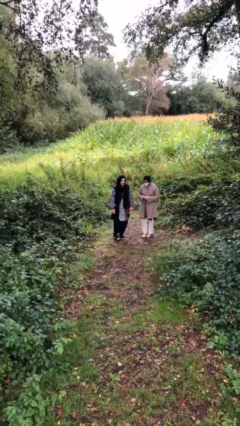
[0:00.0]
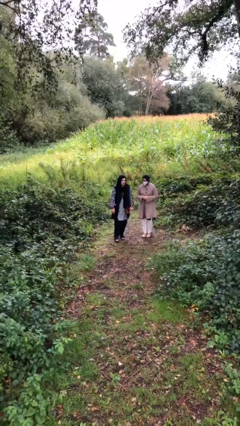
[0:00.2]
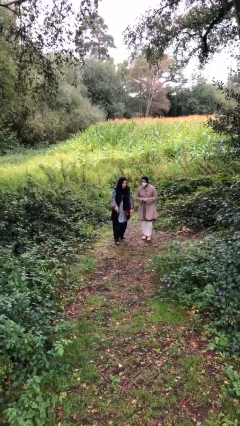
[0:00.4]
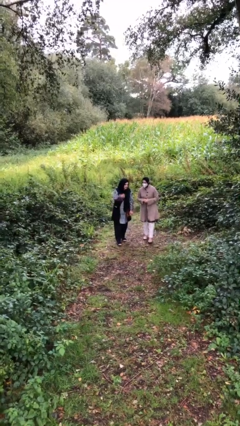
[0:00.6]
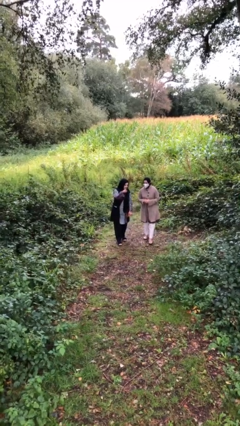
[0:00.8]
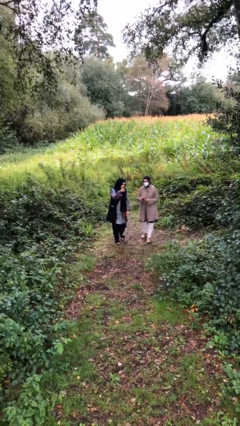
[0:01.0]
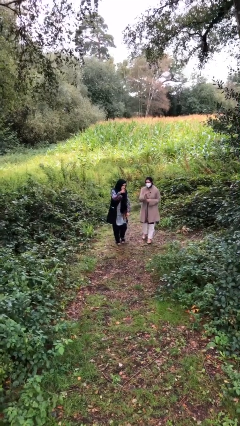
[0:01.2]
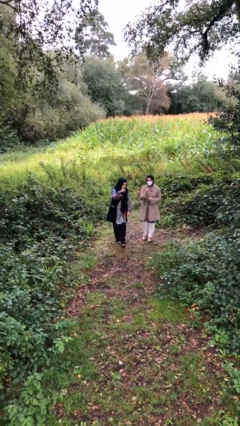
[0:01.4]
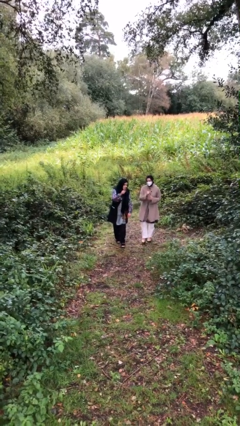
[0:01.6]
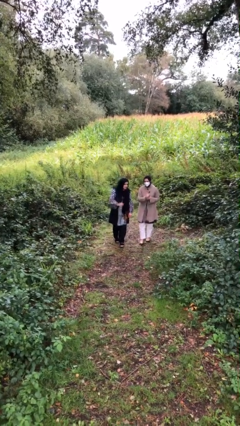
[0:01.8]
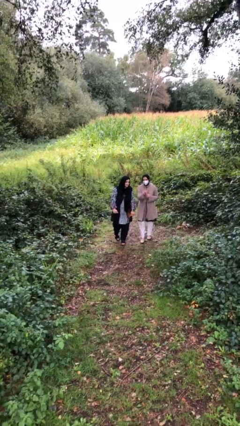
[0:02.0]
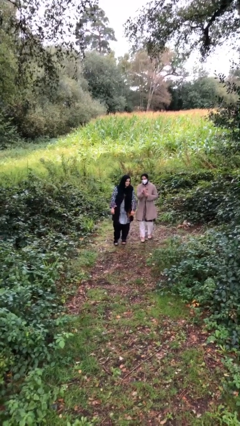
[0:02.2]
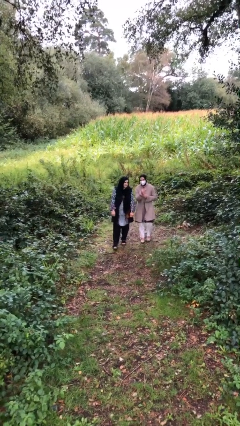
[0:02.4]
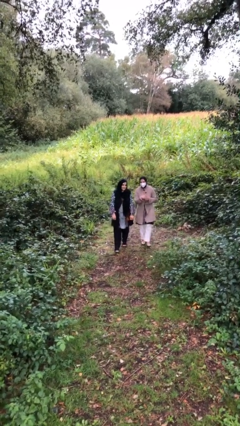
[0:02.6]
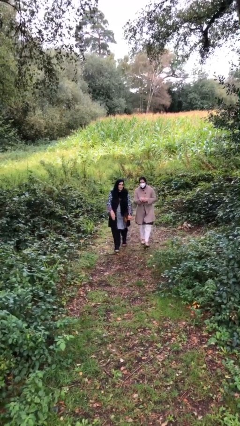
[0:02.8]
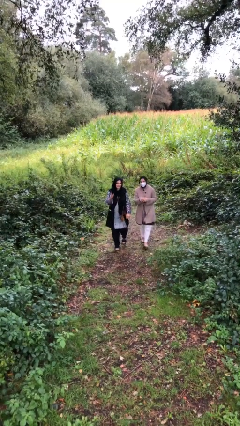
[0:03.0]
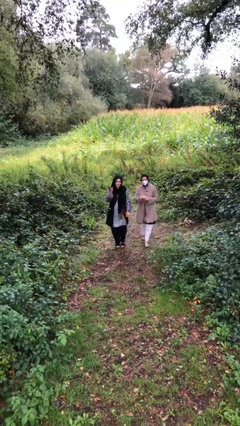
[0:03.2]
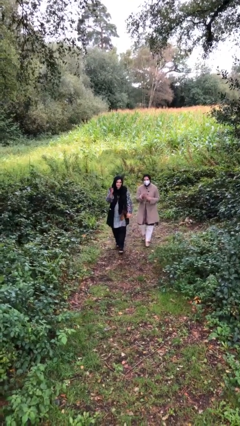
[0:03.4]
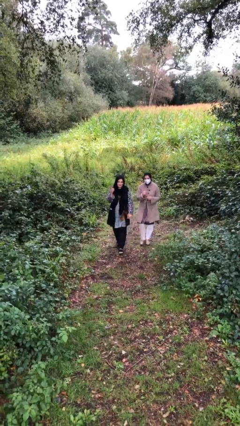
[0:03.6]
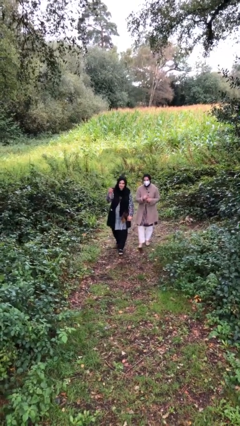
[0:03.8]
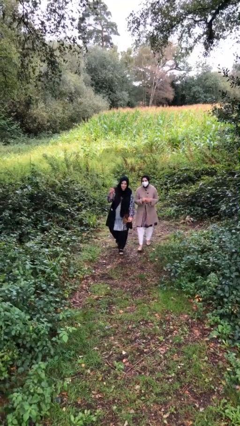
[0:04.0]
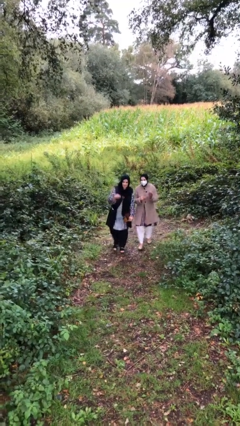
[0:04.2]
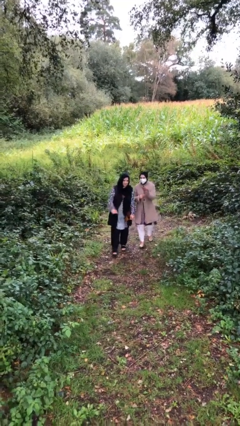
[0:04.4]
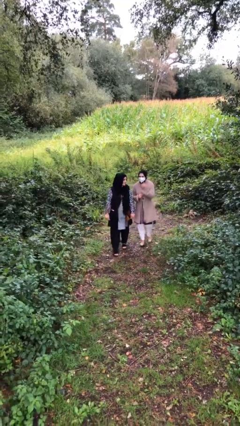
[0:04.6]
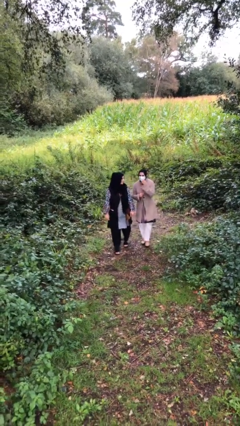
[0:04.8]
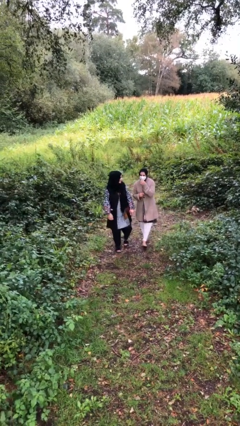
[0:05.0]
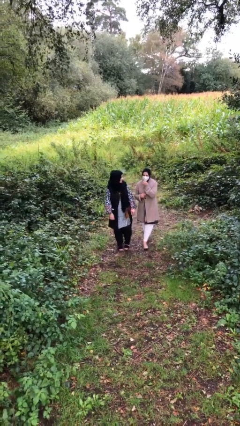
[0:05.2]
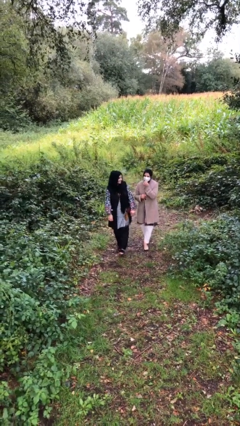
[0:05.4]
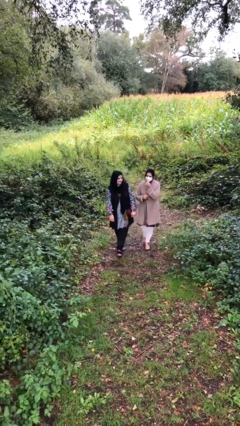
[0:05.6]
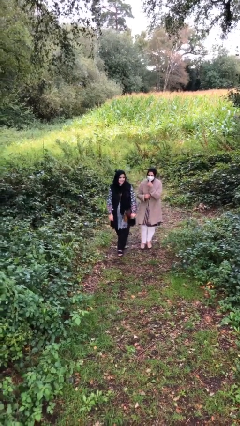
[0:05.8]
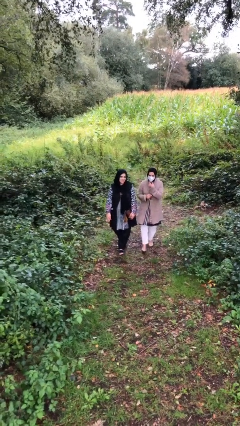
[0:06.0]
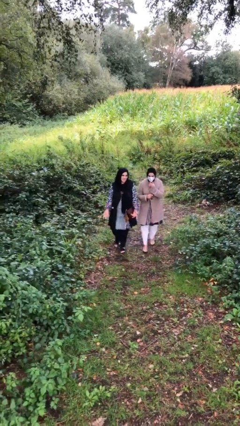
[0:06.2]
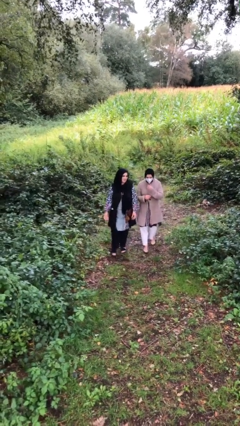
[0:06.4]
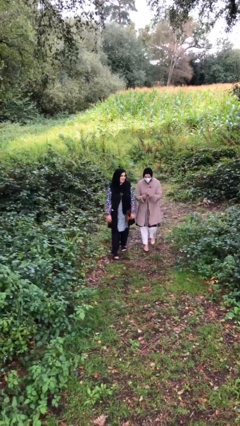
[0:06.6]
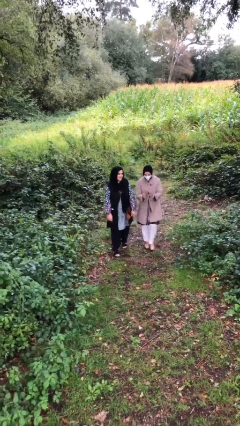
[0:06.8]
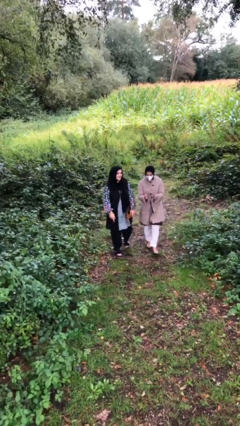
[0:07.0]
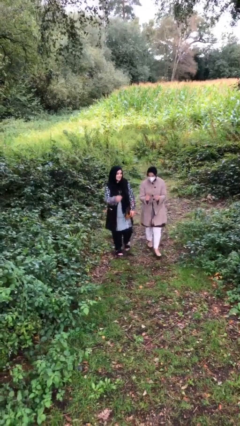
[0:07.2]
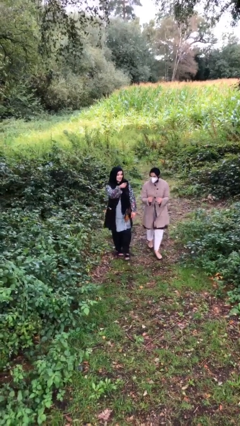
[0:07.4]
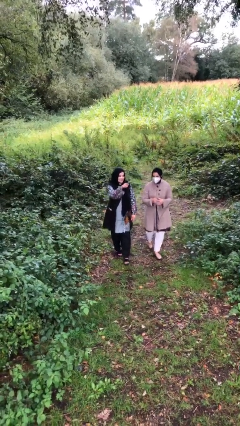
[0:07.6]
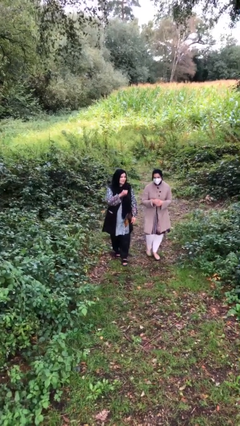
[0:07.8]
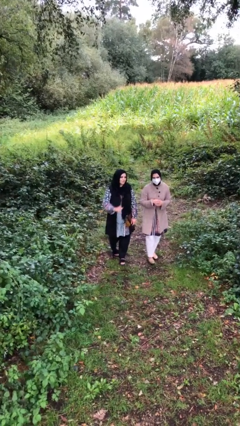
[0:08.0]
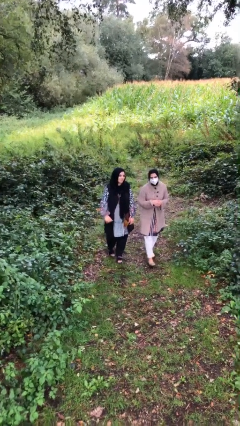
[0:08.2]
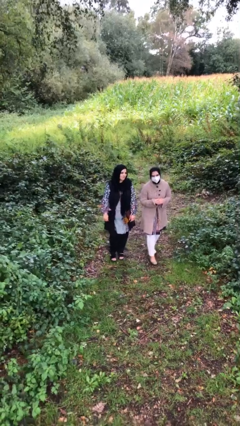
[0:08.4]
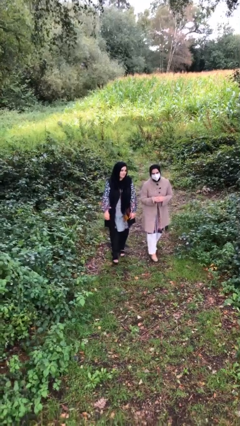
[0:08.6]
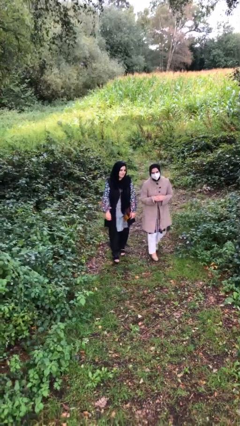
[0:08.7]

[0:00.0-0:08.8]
person talks to person

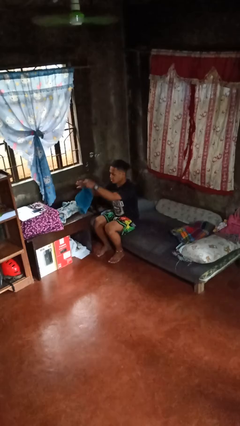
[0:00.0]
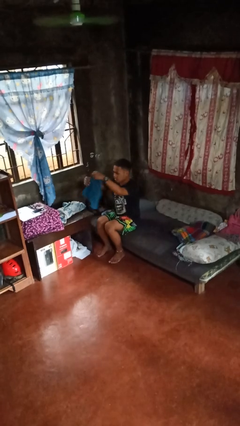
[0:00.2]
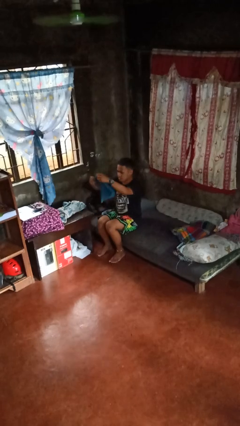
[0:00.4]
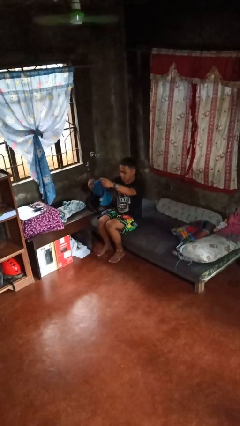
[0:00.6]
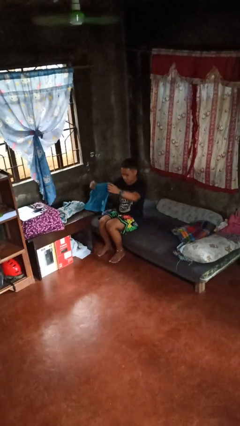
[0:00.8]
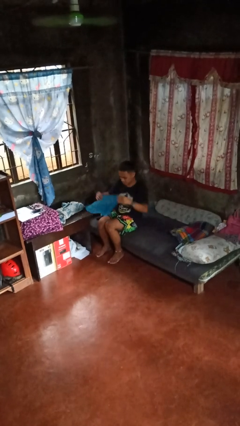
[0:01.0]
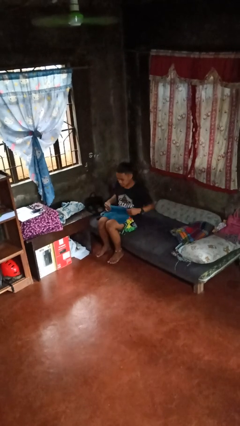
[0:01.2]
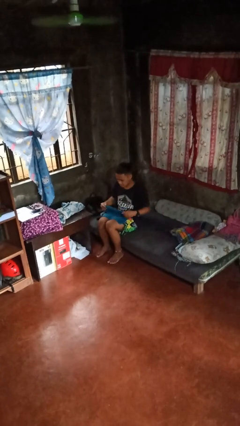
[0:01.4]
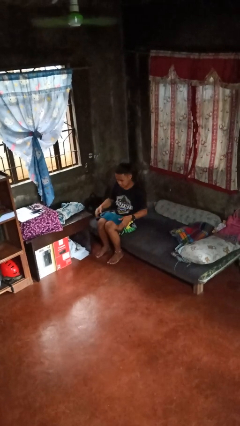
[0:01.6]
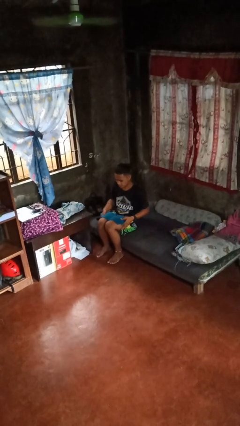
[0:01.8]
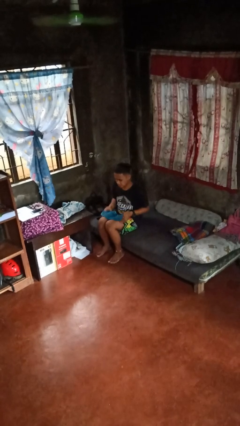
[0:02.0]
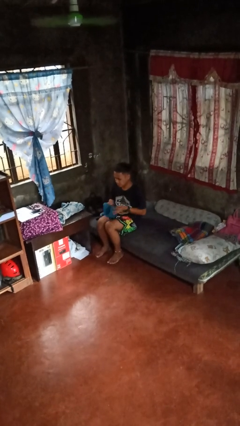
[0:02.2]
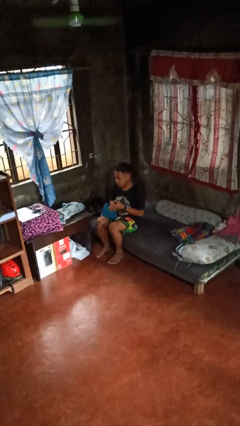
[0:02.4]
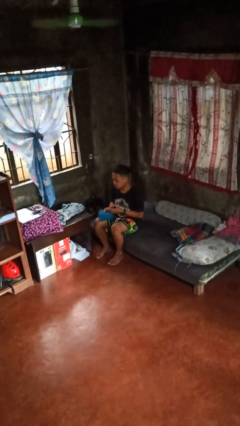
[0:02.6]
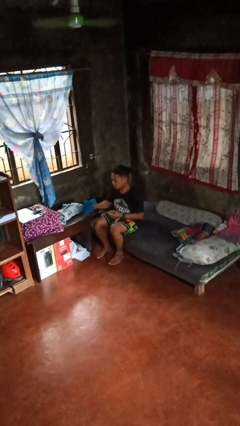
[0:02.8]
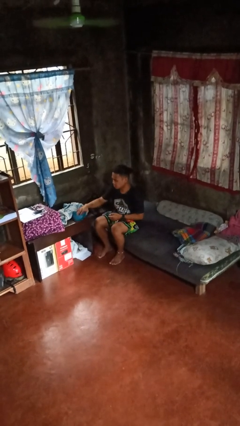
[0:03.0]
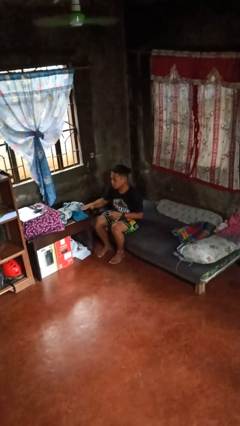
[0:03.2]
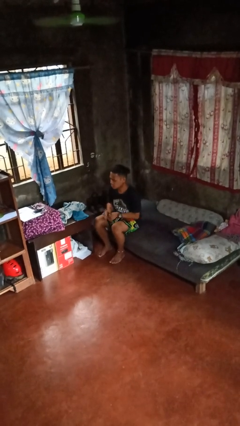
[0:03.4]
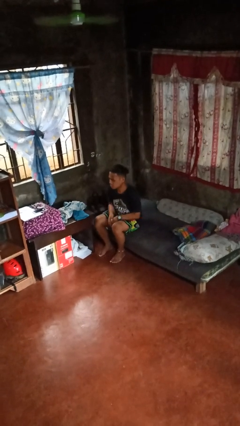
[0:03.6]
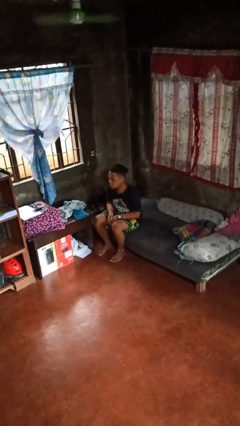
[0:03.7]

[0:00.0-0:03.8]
person folds towel

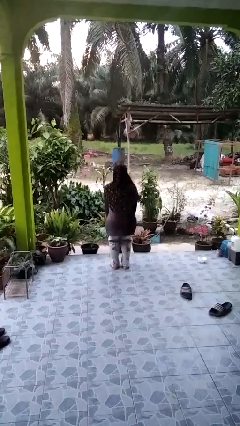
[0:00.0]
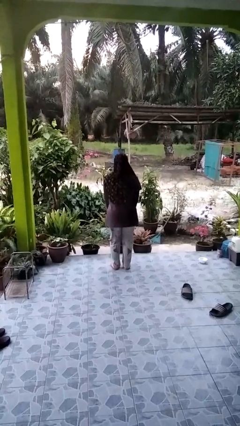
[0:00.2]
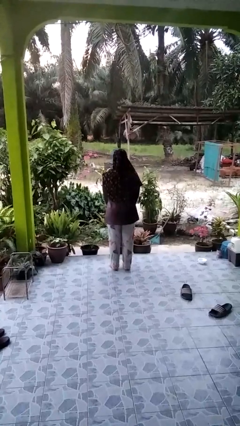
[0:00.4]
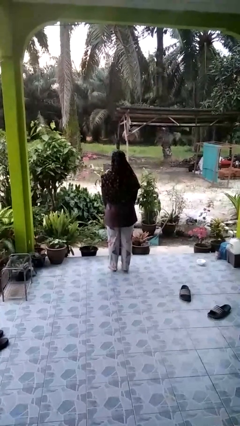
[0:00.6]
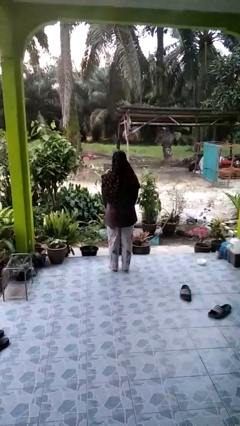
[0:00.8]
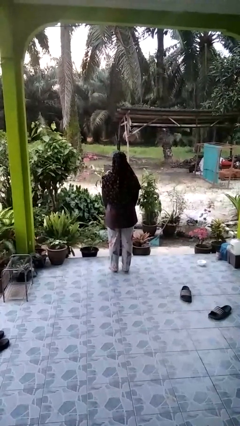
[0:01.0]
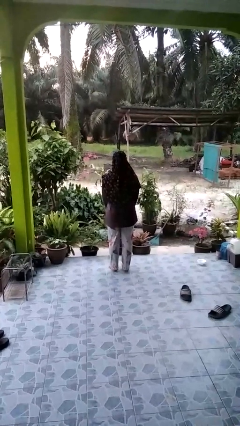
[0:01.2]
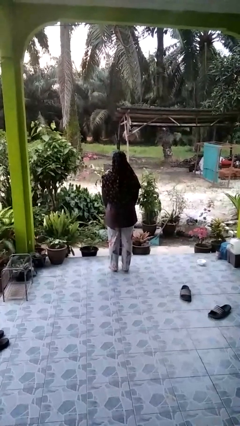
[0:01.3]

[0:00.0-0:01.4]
person stands up

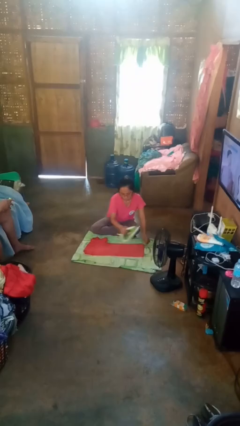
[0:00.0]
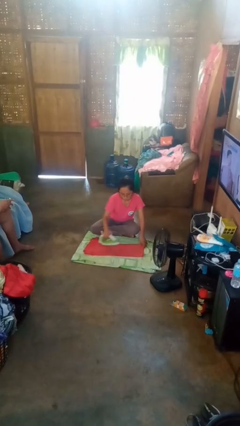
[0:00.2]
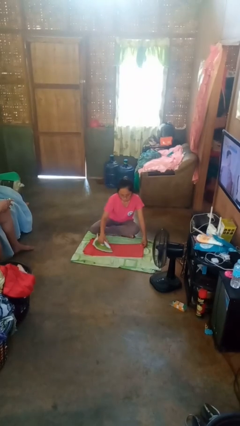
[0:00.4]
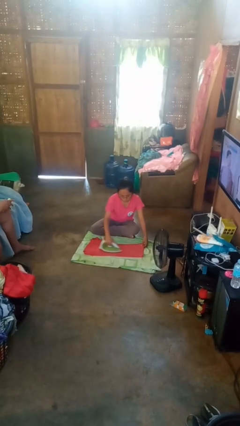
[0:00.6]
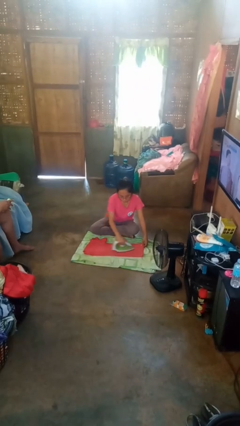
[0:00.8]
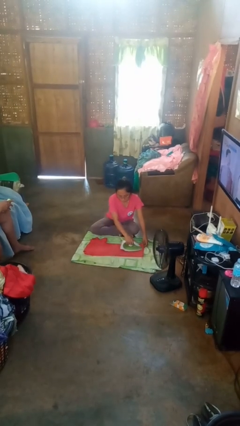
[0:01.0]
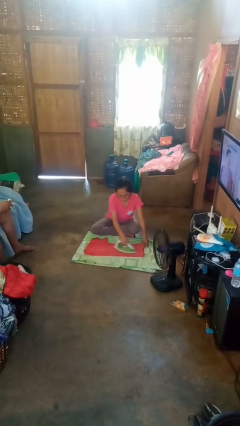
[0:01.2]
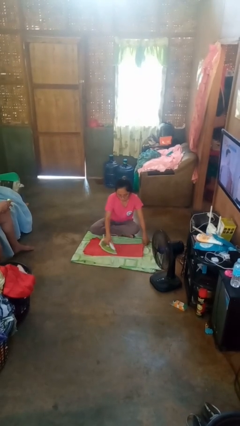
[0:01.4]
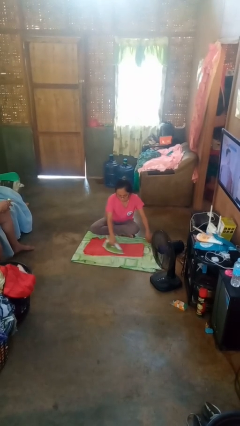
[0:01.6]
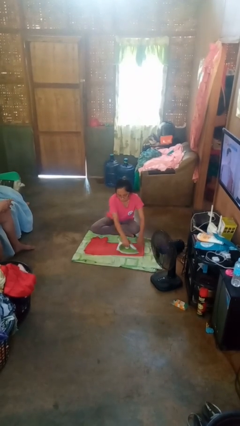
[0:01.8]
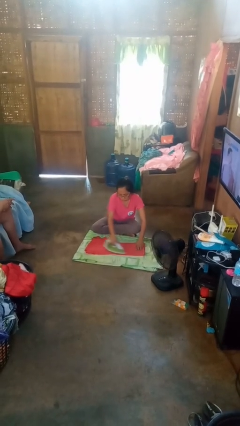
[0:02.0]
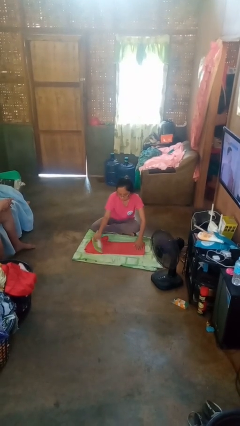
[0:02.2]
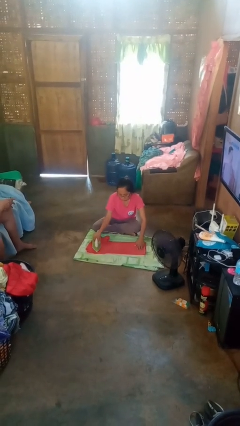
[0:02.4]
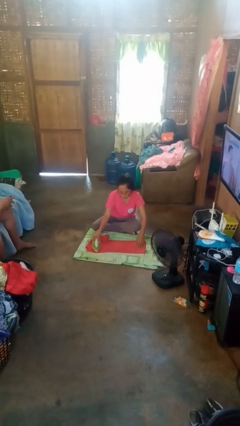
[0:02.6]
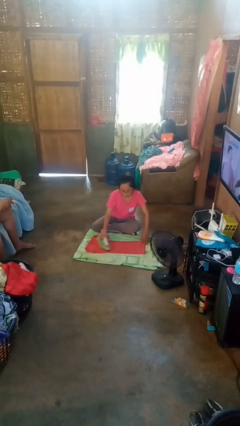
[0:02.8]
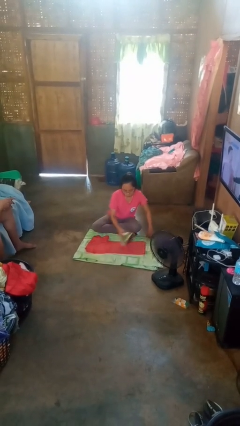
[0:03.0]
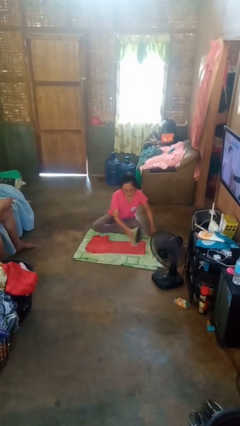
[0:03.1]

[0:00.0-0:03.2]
person irons clothes

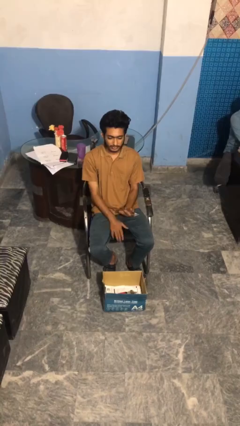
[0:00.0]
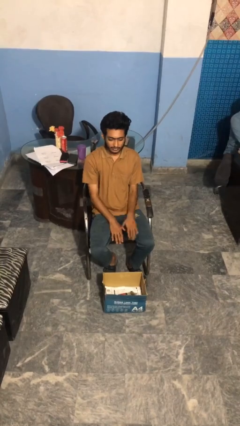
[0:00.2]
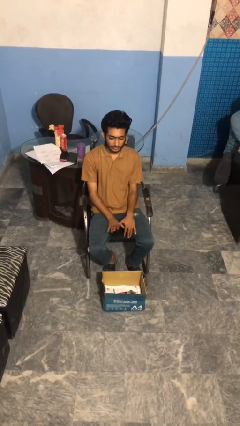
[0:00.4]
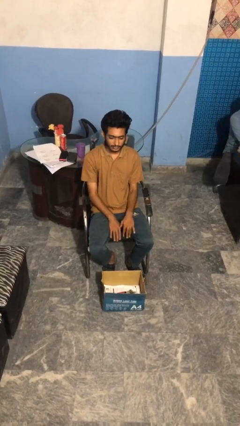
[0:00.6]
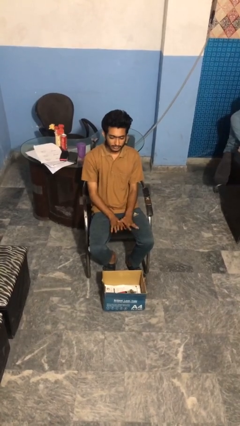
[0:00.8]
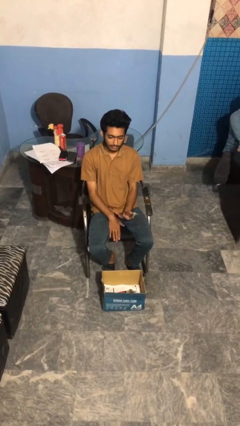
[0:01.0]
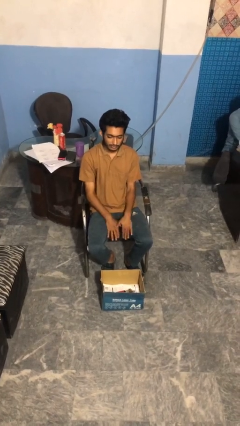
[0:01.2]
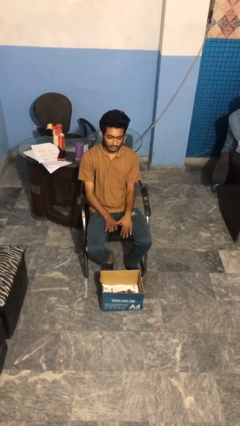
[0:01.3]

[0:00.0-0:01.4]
person takes object from box
